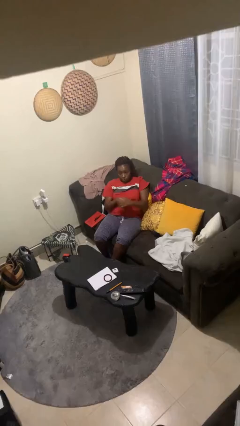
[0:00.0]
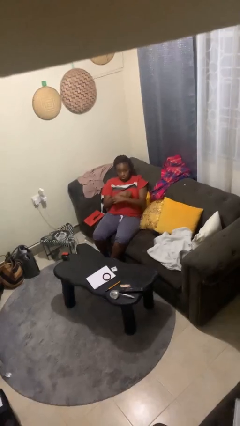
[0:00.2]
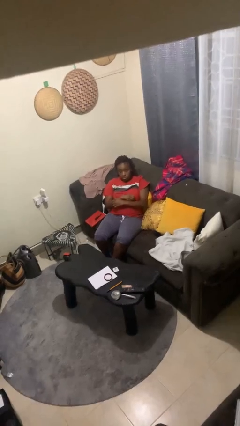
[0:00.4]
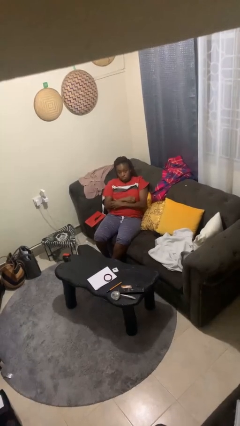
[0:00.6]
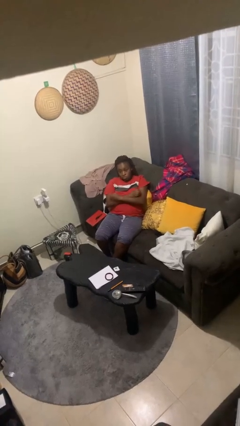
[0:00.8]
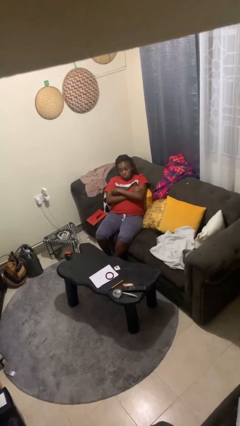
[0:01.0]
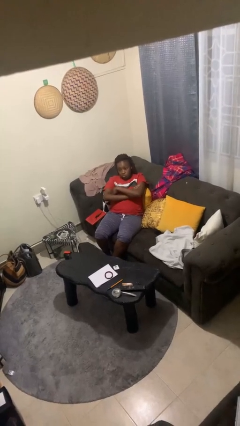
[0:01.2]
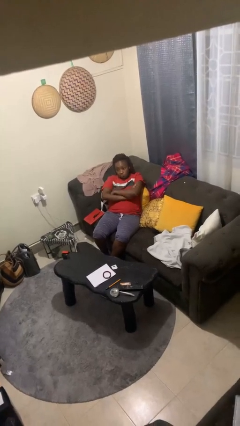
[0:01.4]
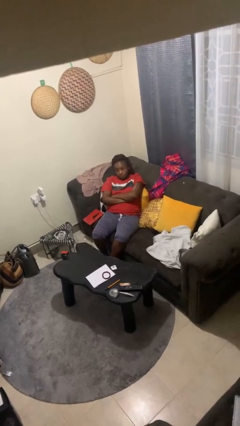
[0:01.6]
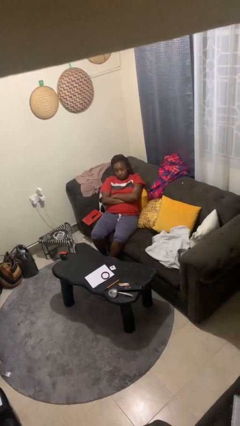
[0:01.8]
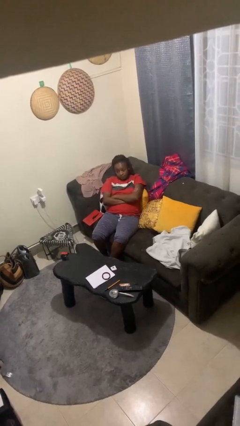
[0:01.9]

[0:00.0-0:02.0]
person crosses arms

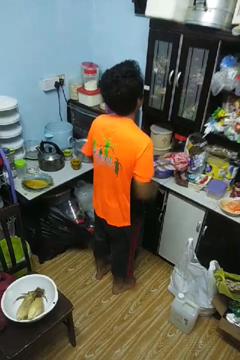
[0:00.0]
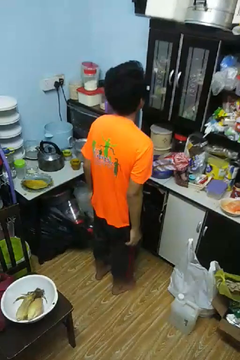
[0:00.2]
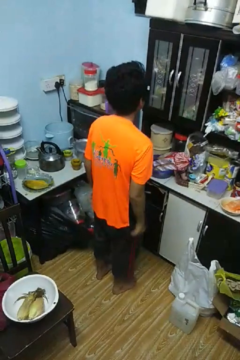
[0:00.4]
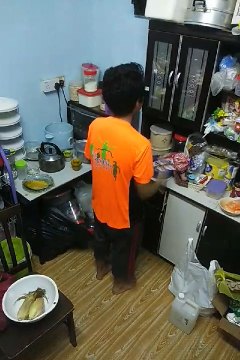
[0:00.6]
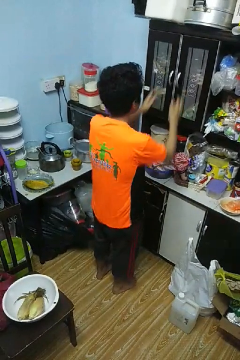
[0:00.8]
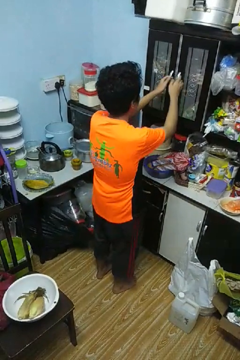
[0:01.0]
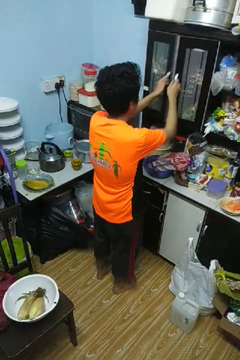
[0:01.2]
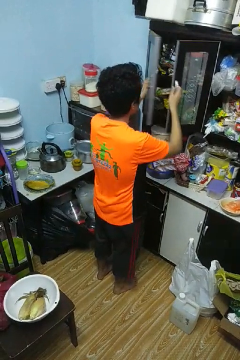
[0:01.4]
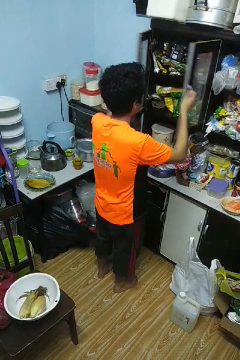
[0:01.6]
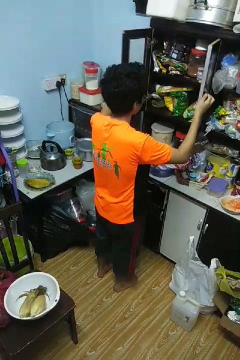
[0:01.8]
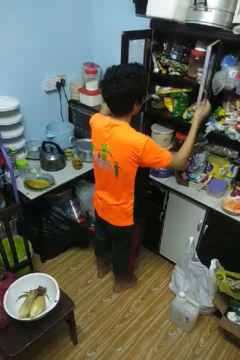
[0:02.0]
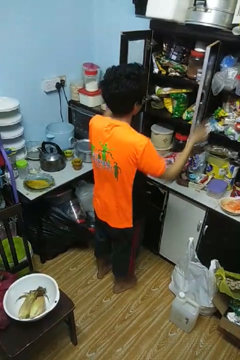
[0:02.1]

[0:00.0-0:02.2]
person opens cabinet

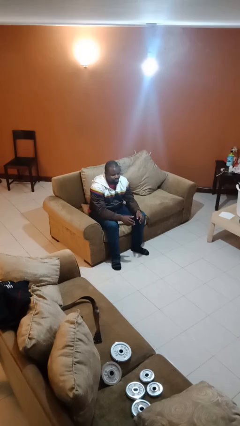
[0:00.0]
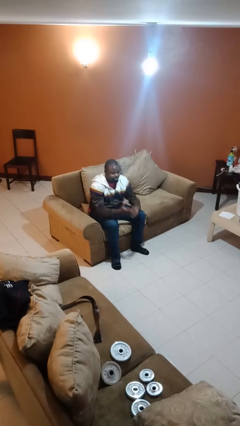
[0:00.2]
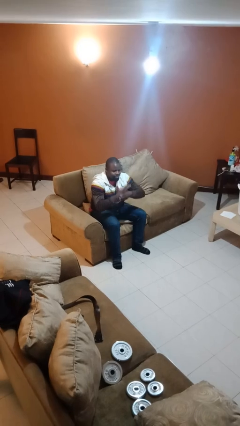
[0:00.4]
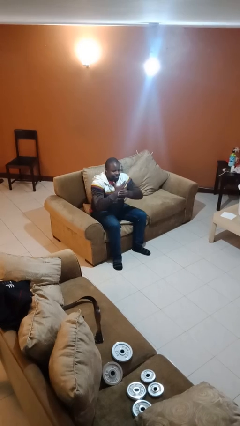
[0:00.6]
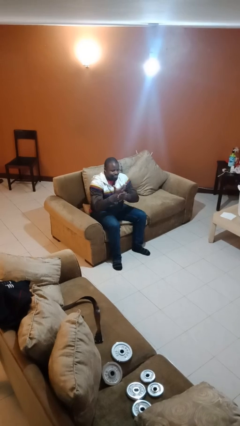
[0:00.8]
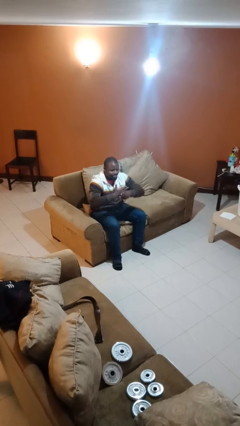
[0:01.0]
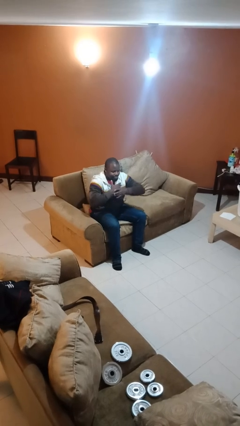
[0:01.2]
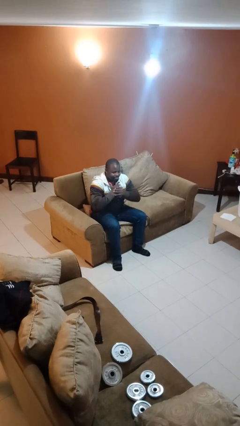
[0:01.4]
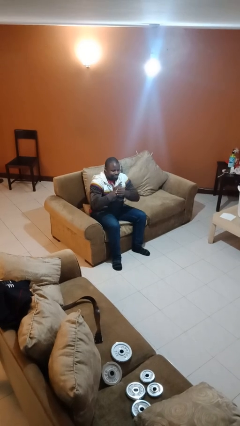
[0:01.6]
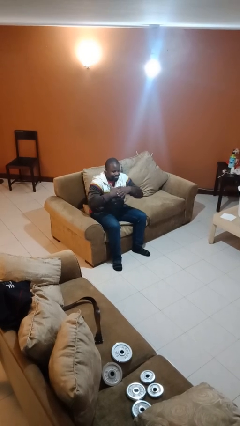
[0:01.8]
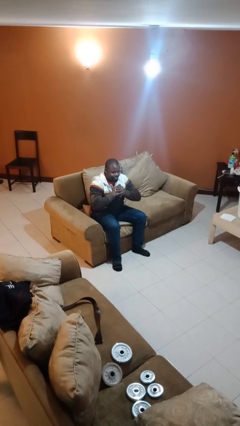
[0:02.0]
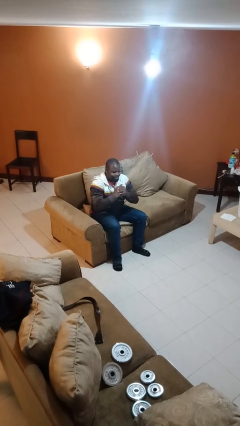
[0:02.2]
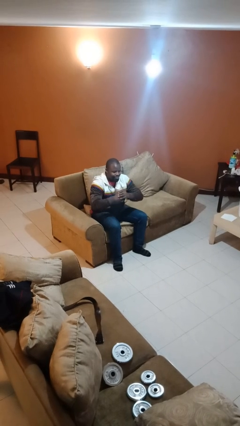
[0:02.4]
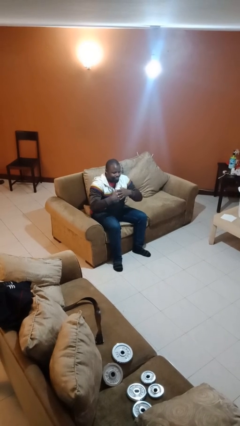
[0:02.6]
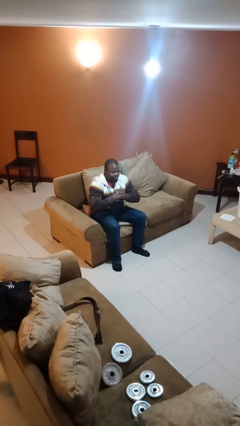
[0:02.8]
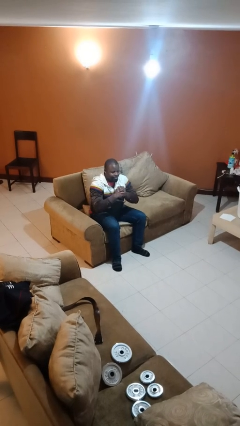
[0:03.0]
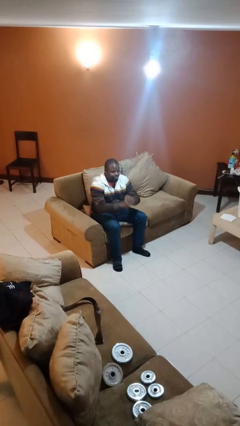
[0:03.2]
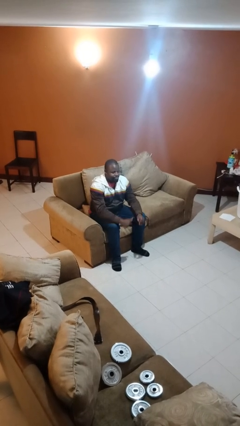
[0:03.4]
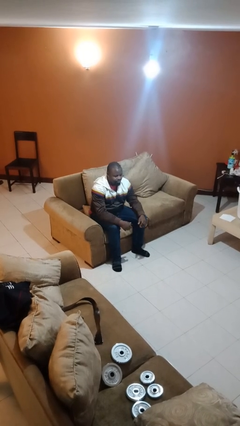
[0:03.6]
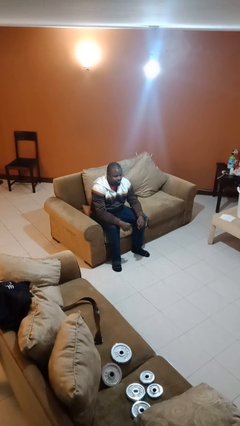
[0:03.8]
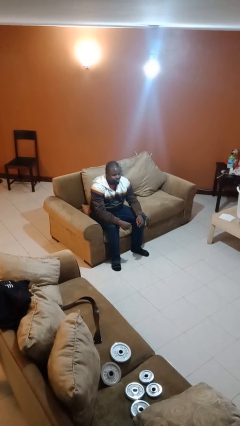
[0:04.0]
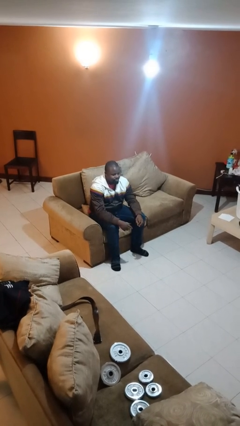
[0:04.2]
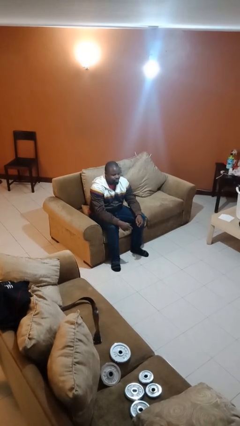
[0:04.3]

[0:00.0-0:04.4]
person cracks knuckles

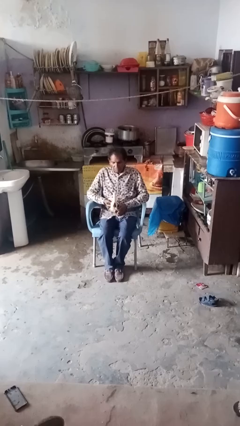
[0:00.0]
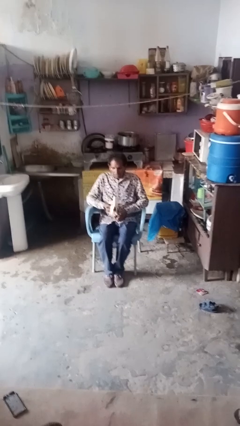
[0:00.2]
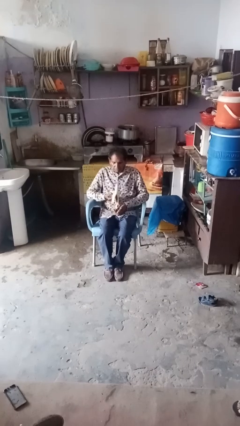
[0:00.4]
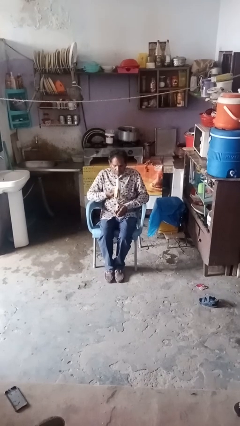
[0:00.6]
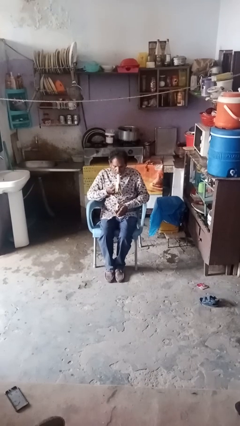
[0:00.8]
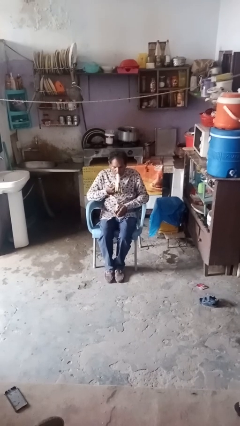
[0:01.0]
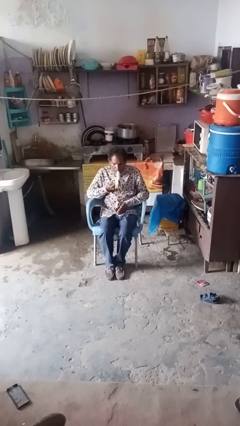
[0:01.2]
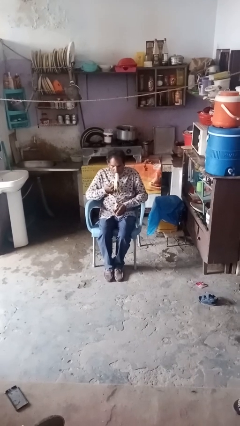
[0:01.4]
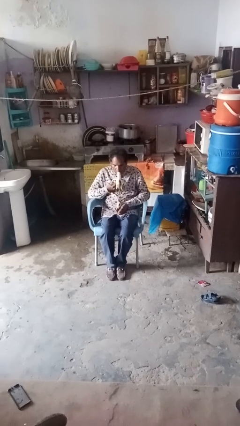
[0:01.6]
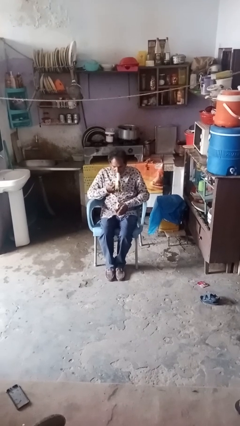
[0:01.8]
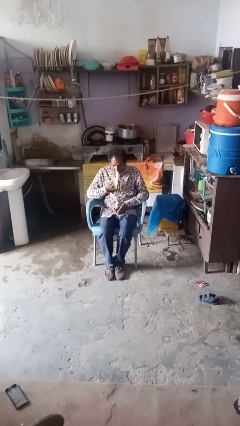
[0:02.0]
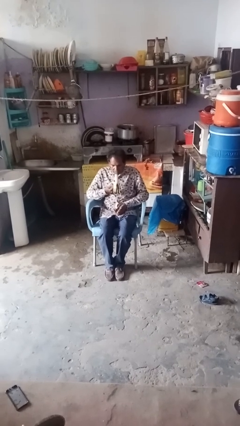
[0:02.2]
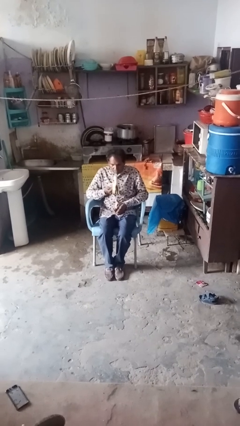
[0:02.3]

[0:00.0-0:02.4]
person eats banana

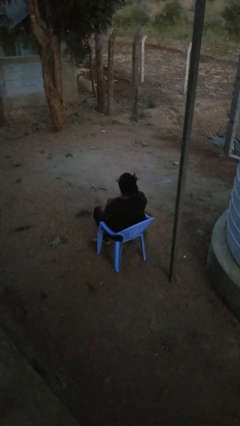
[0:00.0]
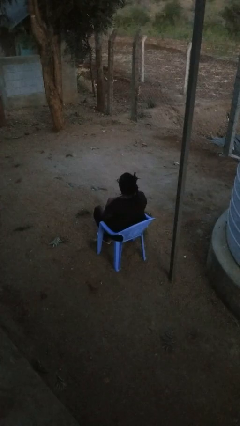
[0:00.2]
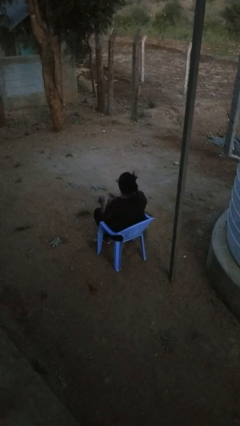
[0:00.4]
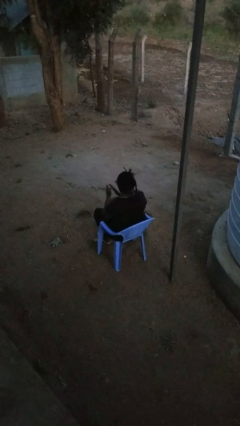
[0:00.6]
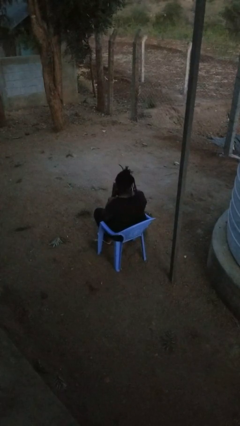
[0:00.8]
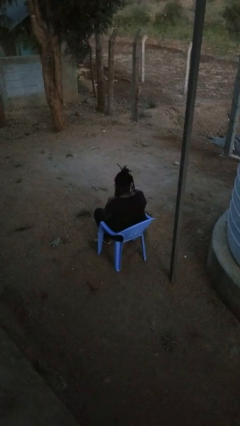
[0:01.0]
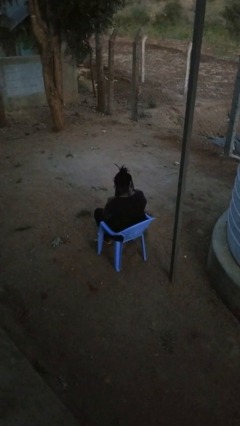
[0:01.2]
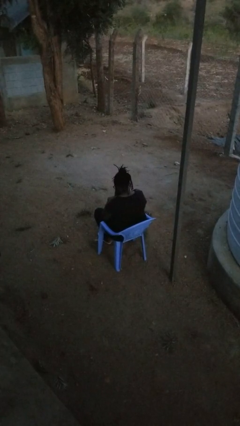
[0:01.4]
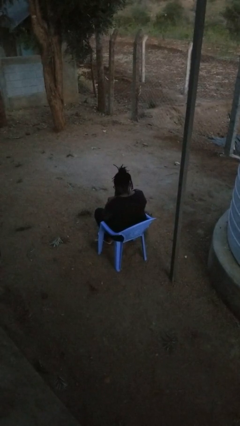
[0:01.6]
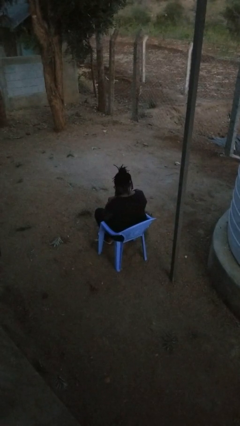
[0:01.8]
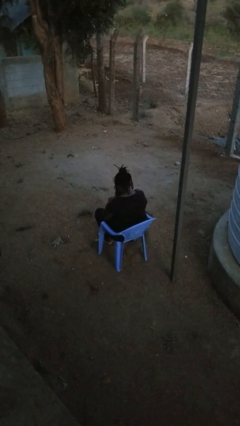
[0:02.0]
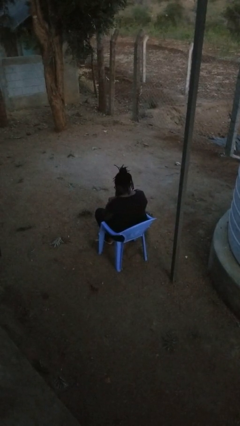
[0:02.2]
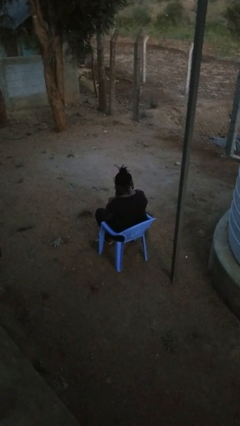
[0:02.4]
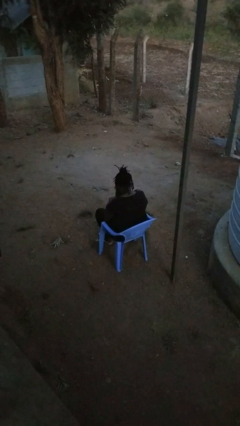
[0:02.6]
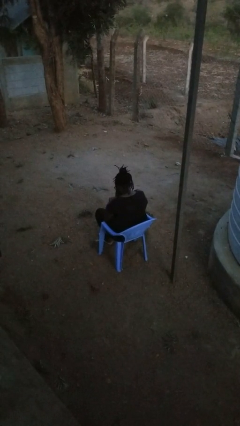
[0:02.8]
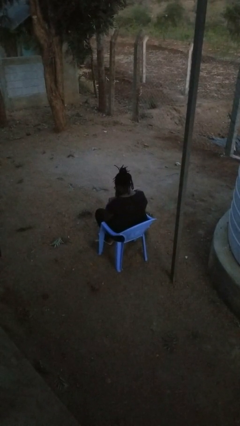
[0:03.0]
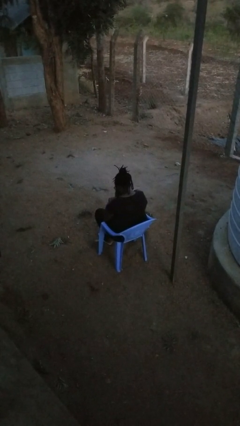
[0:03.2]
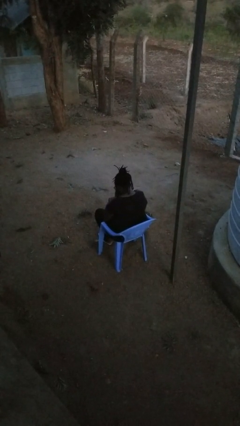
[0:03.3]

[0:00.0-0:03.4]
person prays

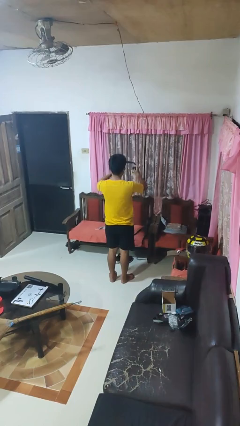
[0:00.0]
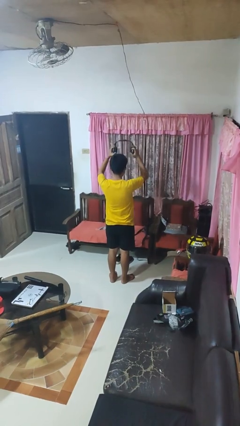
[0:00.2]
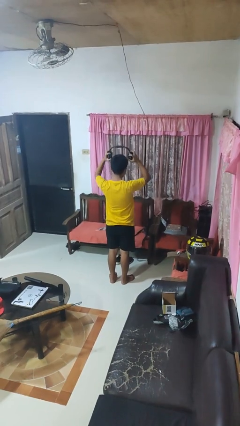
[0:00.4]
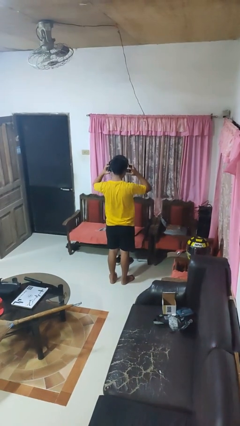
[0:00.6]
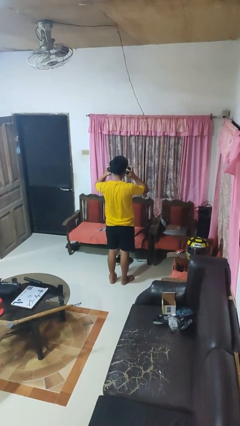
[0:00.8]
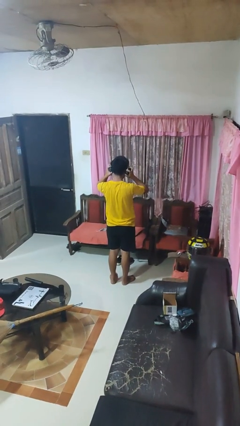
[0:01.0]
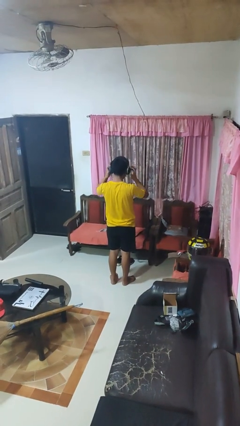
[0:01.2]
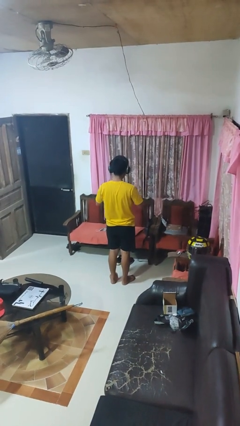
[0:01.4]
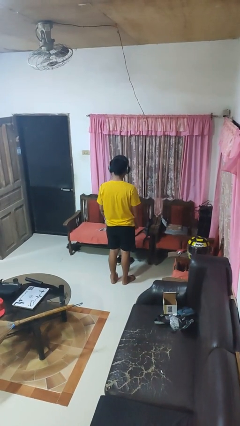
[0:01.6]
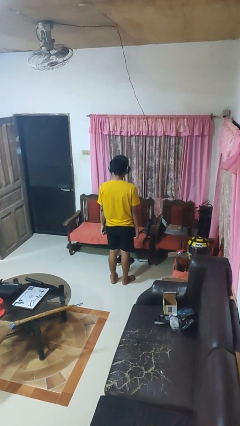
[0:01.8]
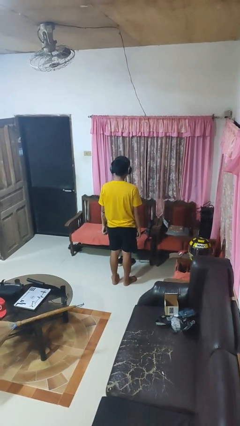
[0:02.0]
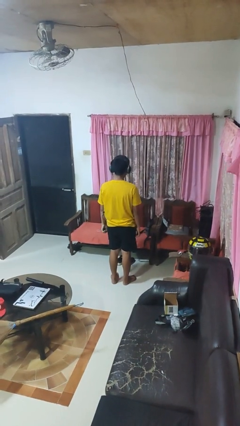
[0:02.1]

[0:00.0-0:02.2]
person puts on headphones

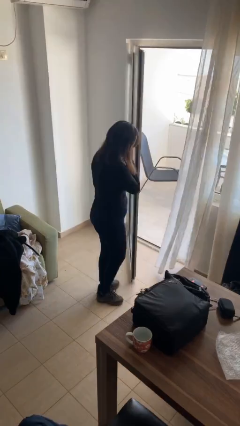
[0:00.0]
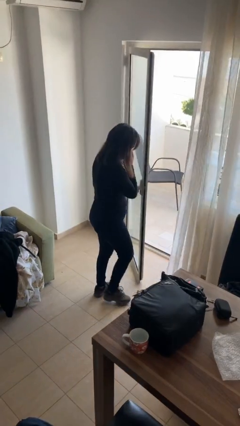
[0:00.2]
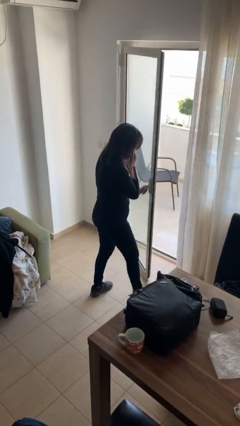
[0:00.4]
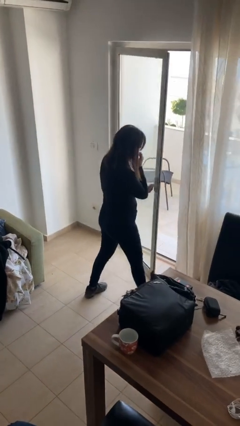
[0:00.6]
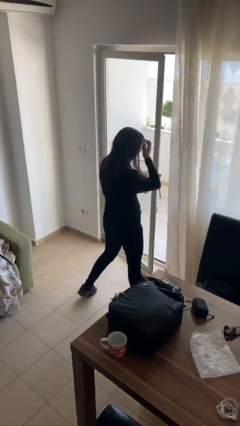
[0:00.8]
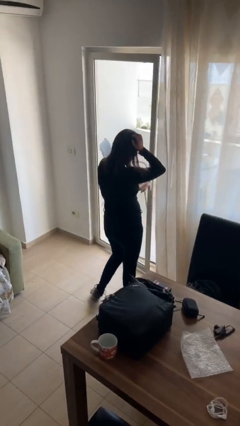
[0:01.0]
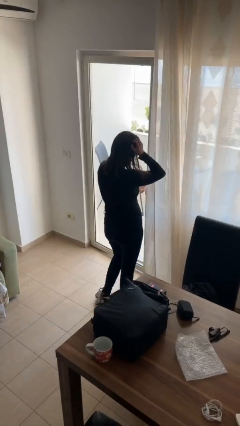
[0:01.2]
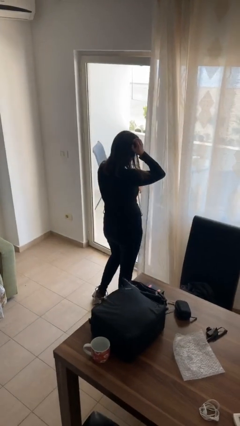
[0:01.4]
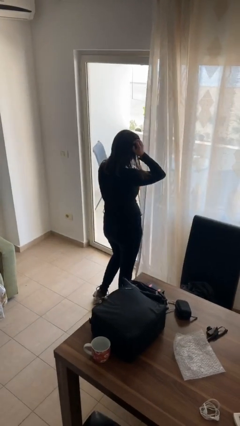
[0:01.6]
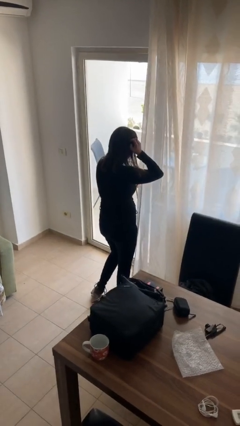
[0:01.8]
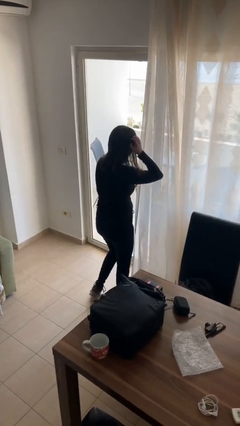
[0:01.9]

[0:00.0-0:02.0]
person closes facility door
